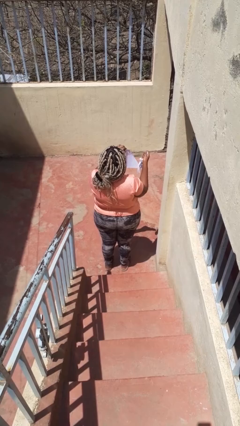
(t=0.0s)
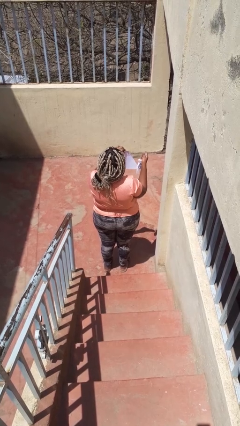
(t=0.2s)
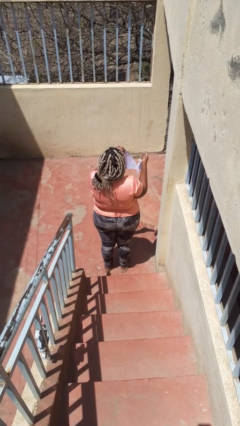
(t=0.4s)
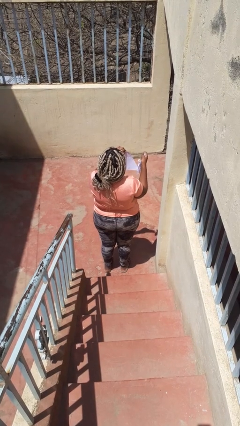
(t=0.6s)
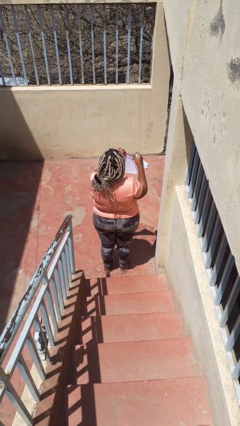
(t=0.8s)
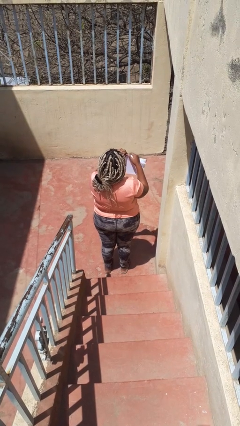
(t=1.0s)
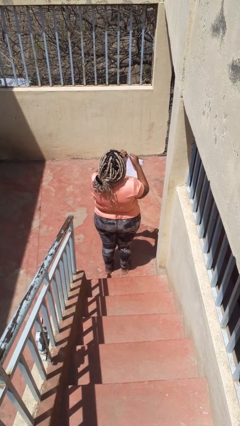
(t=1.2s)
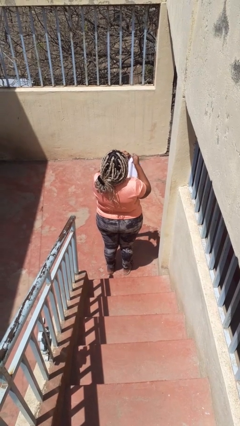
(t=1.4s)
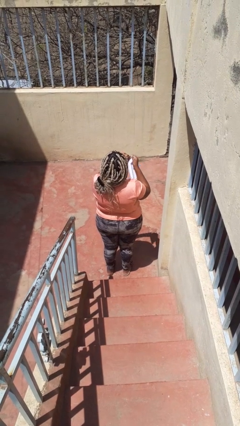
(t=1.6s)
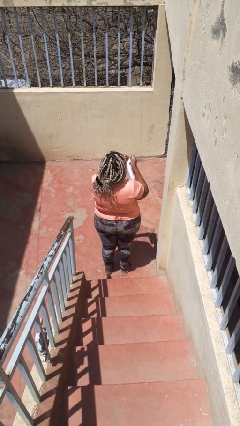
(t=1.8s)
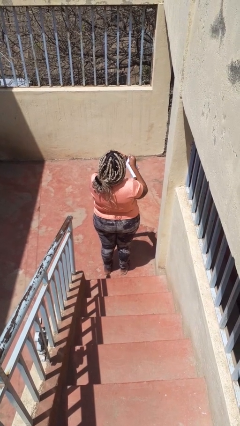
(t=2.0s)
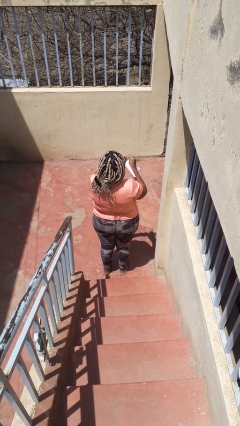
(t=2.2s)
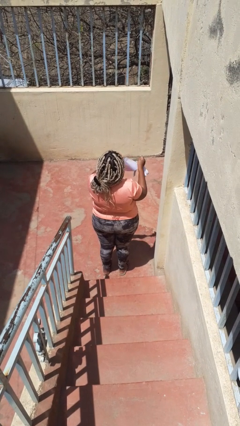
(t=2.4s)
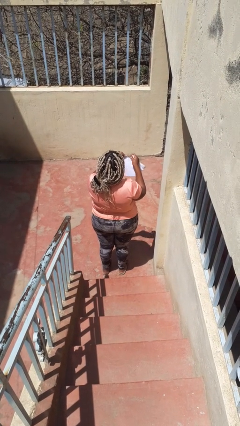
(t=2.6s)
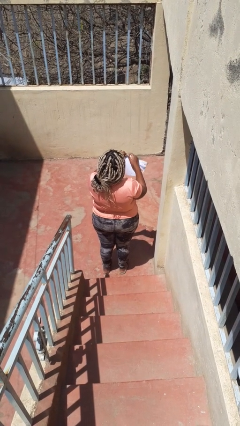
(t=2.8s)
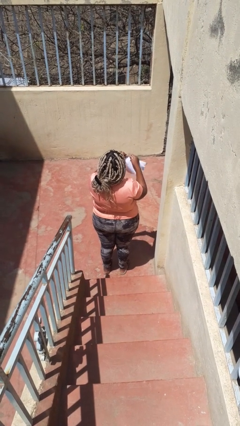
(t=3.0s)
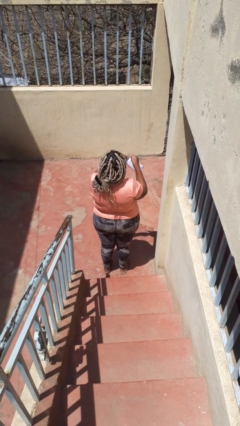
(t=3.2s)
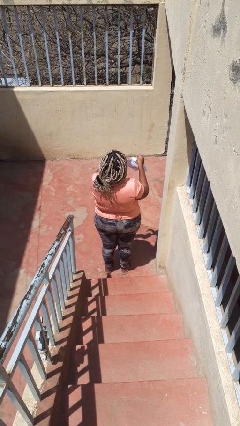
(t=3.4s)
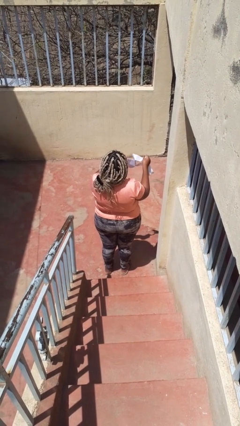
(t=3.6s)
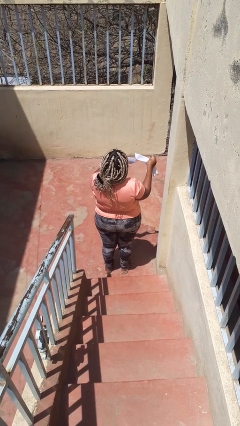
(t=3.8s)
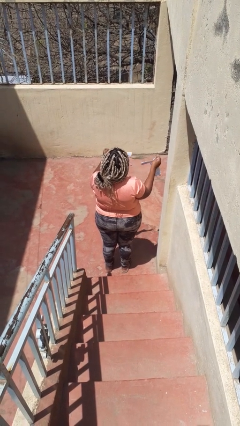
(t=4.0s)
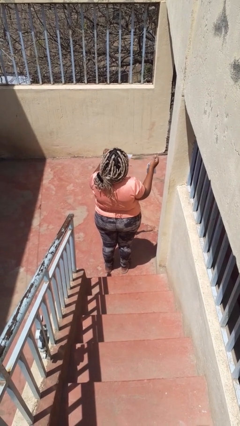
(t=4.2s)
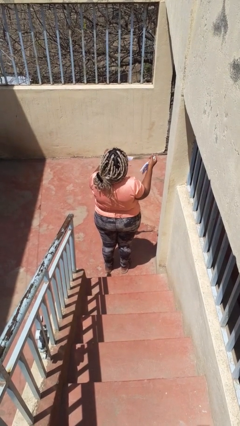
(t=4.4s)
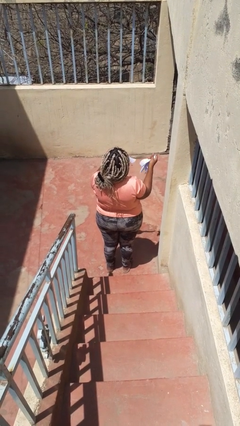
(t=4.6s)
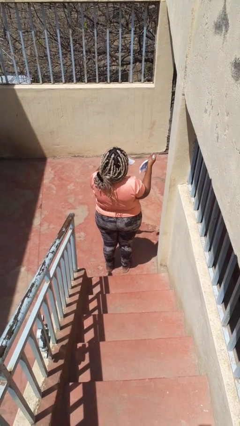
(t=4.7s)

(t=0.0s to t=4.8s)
person tears paper

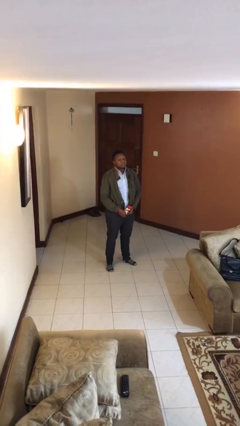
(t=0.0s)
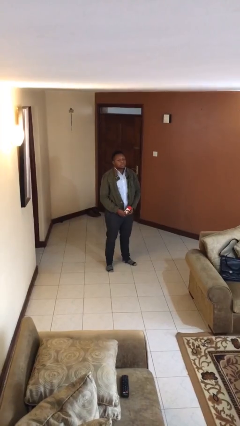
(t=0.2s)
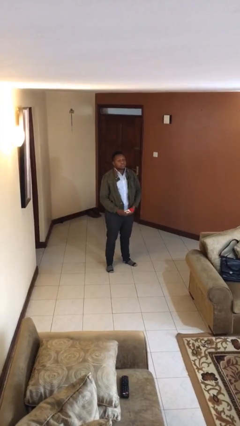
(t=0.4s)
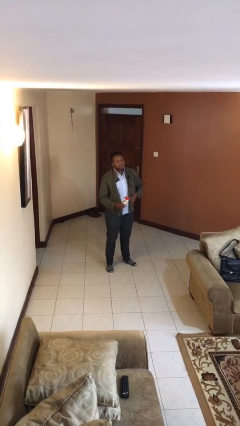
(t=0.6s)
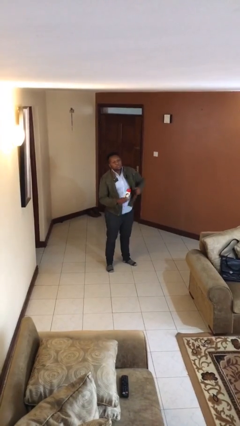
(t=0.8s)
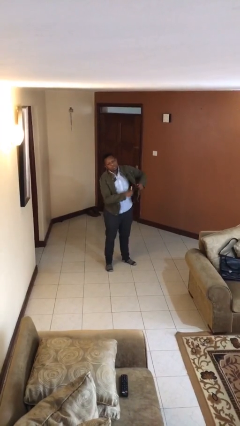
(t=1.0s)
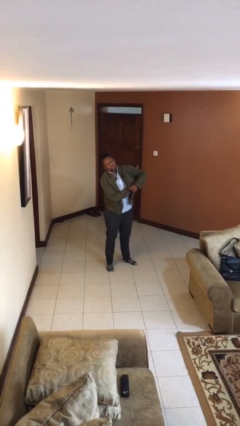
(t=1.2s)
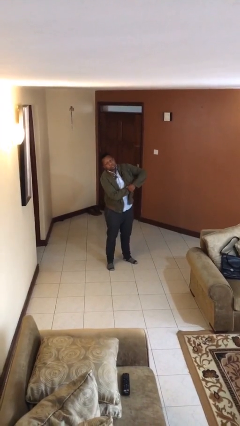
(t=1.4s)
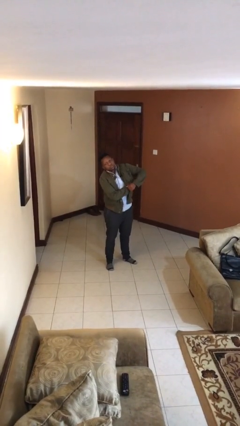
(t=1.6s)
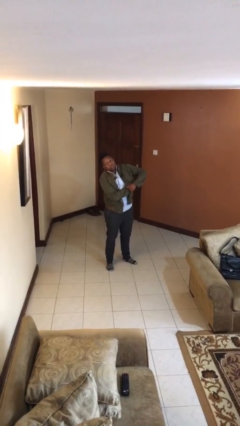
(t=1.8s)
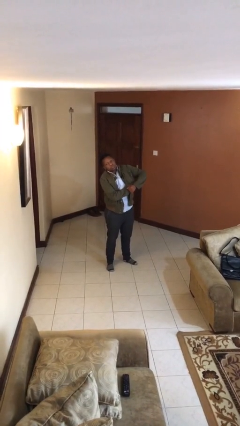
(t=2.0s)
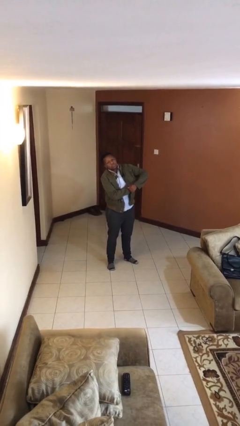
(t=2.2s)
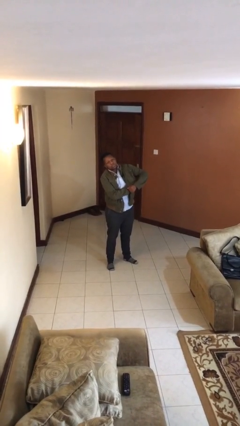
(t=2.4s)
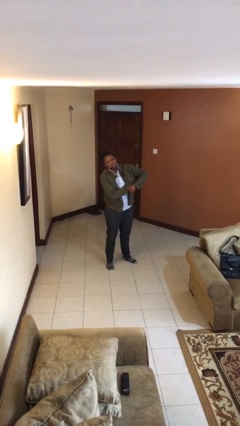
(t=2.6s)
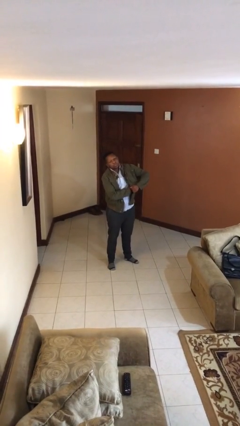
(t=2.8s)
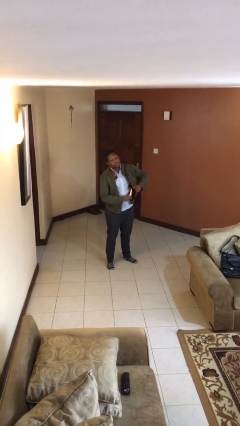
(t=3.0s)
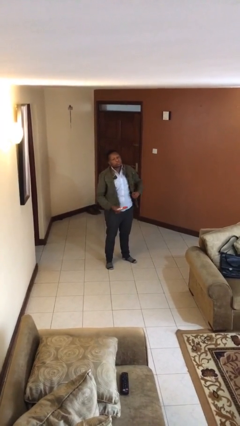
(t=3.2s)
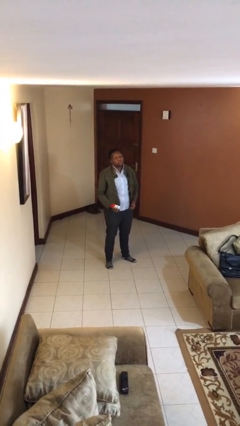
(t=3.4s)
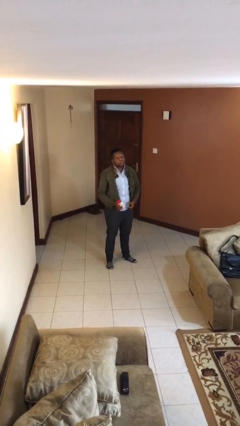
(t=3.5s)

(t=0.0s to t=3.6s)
person applies deodorant

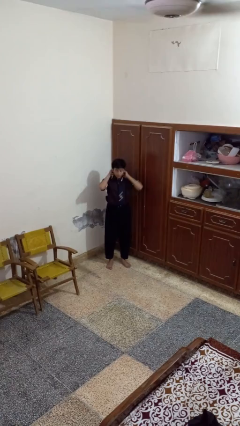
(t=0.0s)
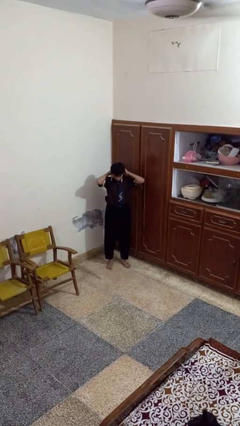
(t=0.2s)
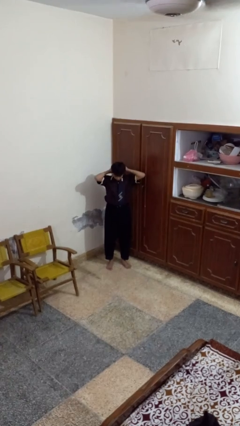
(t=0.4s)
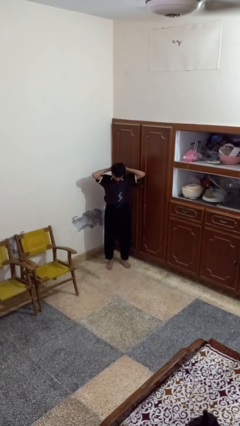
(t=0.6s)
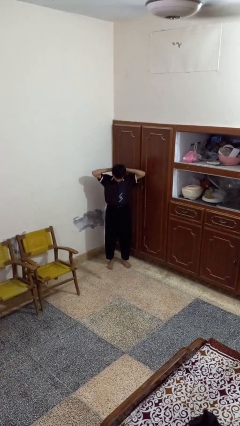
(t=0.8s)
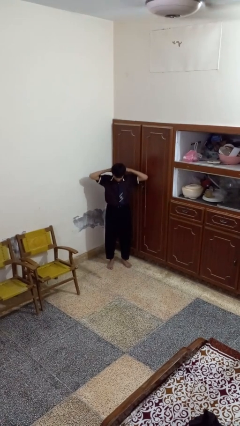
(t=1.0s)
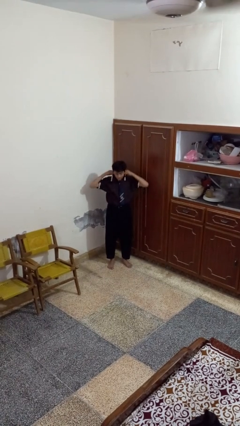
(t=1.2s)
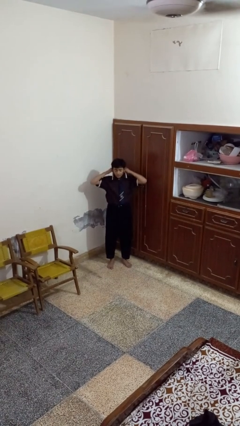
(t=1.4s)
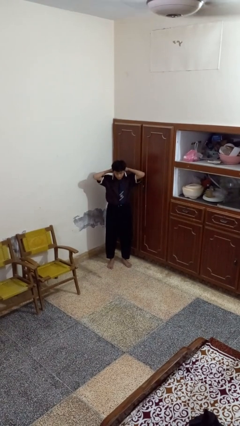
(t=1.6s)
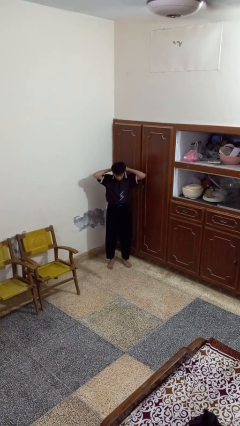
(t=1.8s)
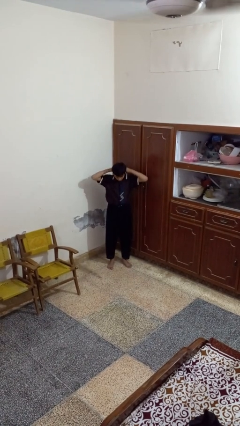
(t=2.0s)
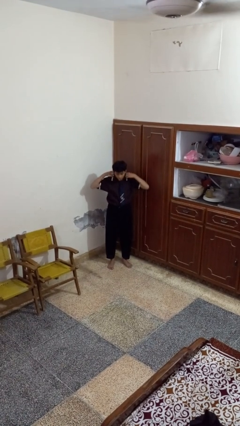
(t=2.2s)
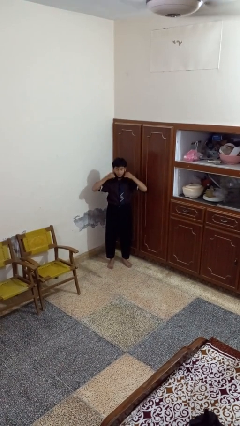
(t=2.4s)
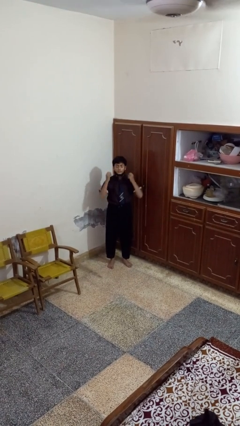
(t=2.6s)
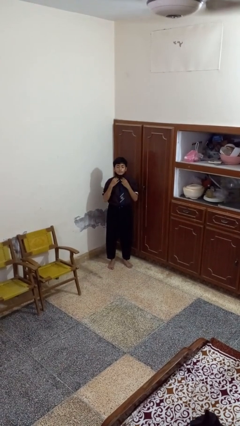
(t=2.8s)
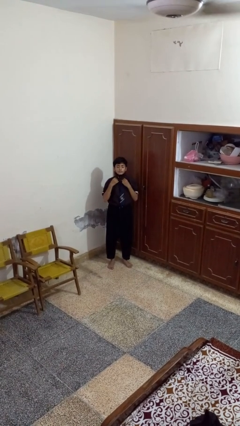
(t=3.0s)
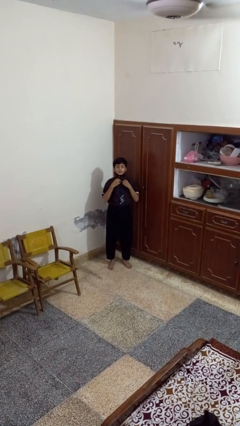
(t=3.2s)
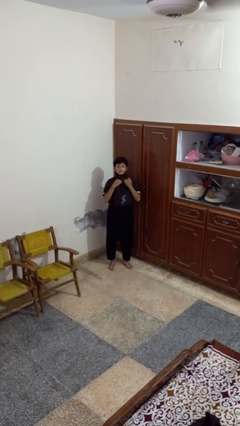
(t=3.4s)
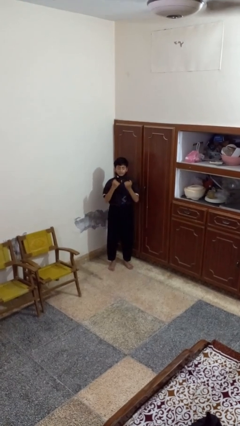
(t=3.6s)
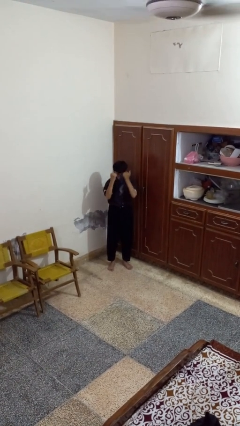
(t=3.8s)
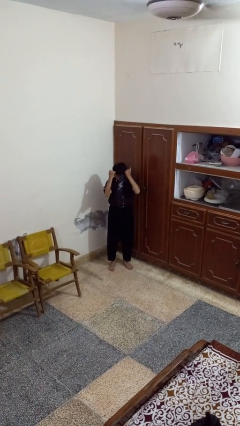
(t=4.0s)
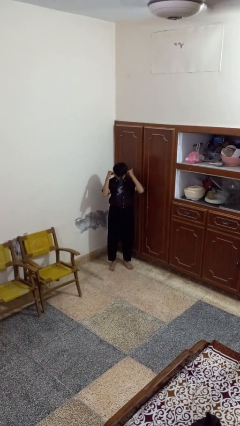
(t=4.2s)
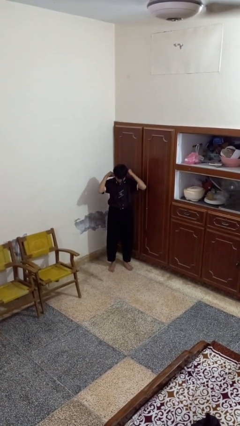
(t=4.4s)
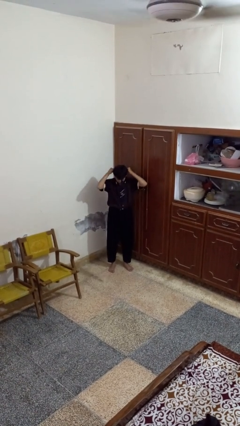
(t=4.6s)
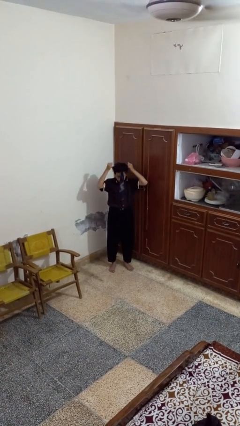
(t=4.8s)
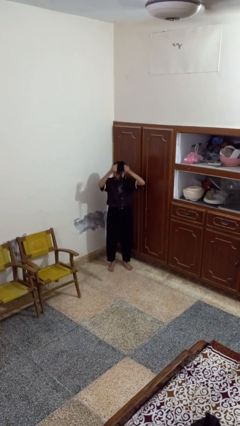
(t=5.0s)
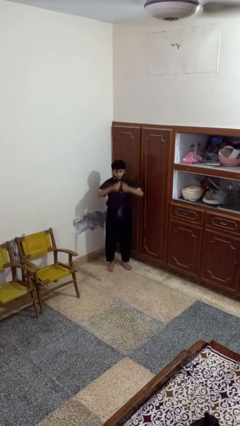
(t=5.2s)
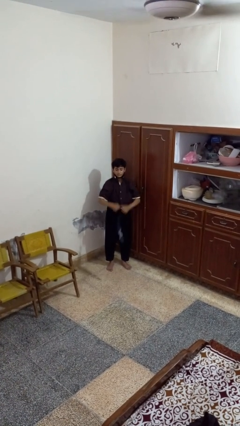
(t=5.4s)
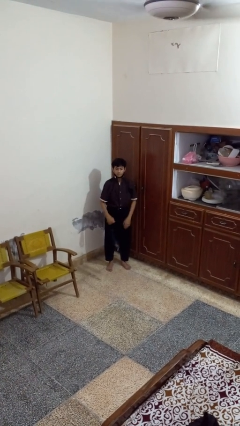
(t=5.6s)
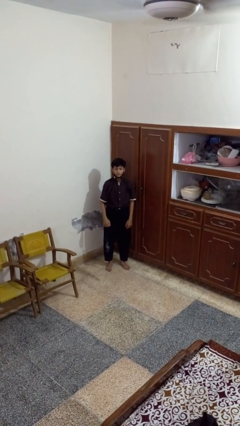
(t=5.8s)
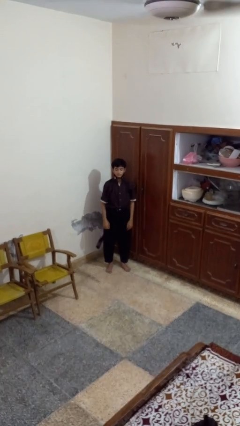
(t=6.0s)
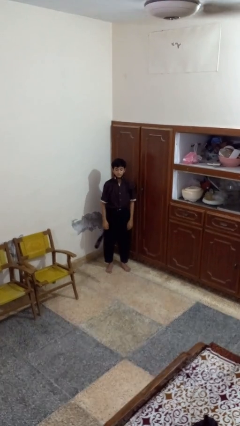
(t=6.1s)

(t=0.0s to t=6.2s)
person takes off necktie

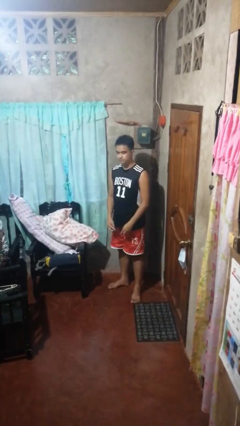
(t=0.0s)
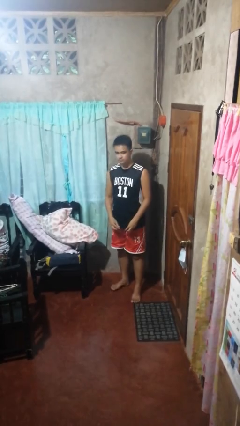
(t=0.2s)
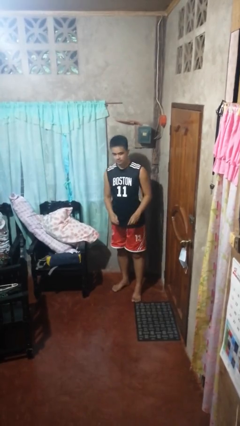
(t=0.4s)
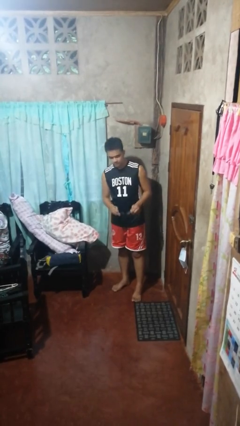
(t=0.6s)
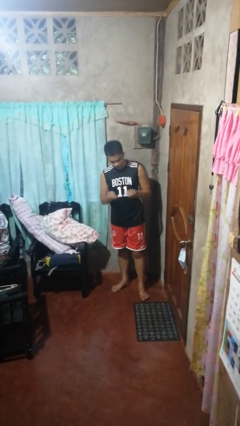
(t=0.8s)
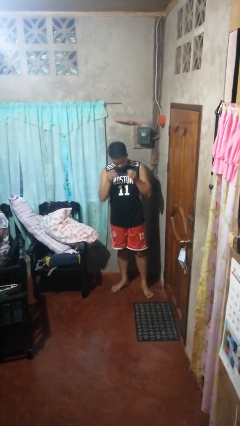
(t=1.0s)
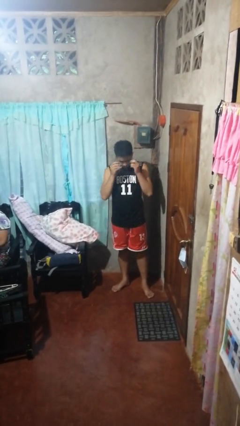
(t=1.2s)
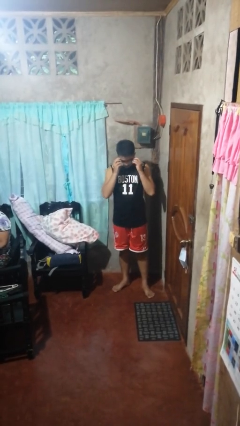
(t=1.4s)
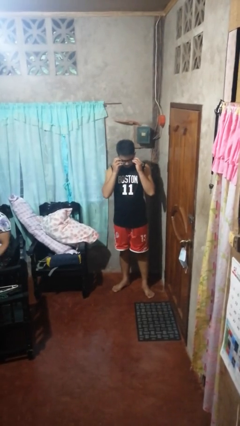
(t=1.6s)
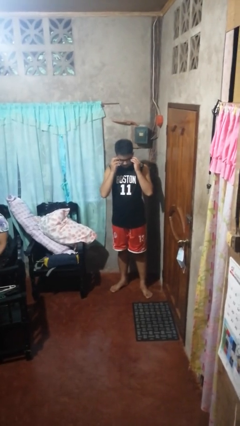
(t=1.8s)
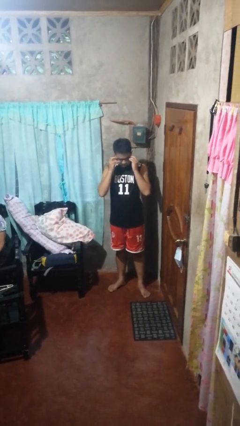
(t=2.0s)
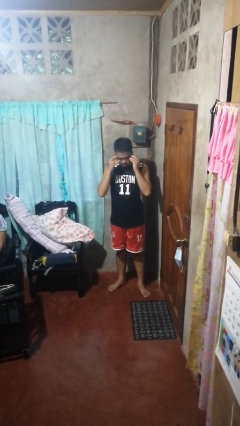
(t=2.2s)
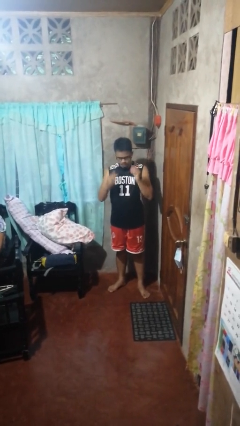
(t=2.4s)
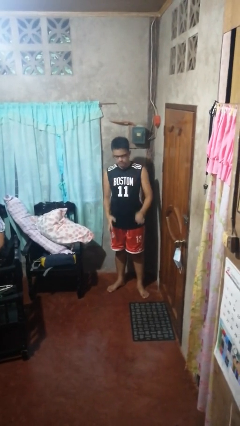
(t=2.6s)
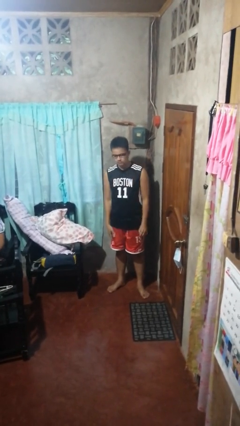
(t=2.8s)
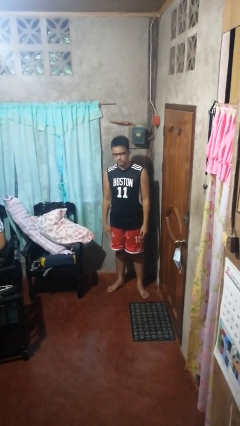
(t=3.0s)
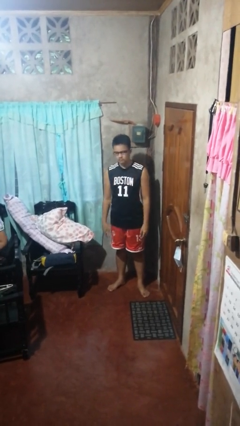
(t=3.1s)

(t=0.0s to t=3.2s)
person puts on glasses

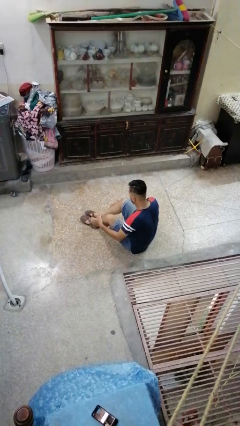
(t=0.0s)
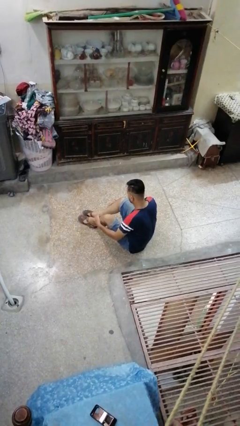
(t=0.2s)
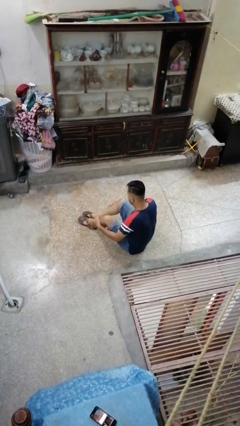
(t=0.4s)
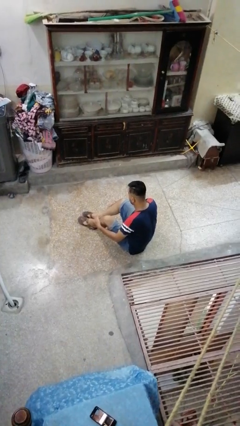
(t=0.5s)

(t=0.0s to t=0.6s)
person crosses legs
